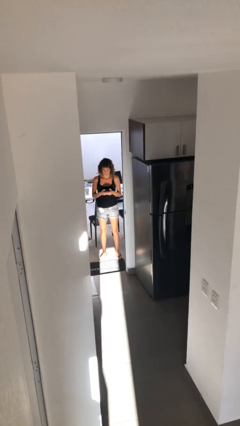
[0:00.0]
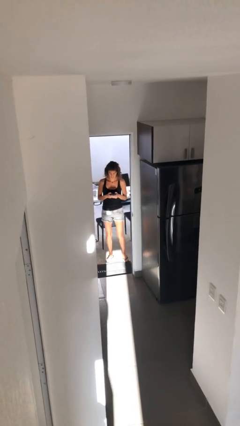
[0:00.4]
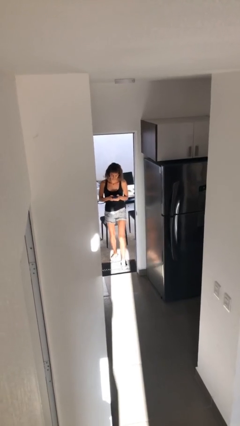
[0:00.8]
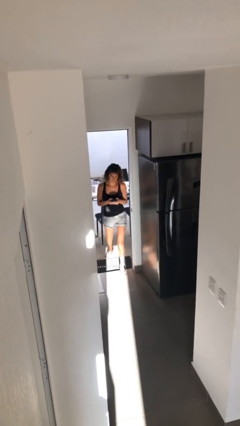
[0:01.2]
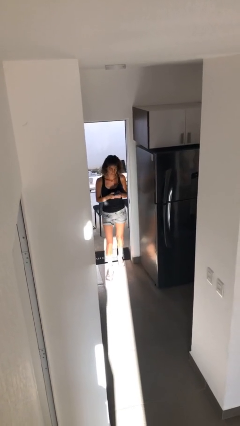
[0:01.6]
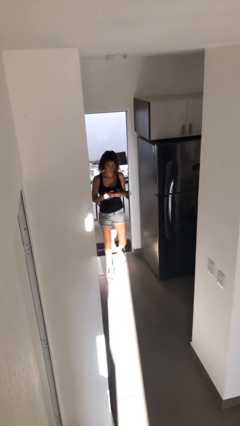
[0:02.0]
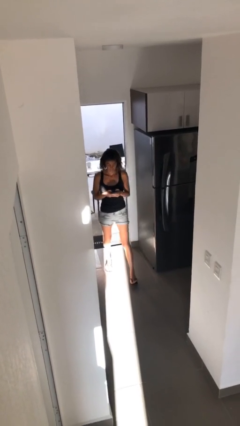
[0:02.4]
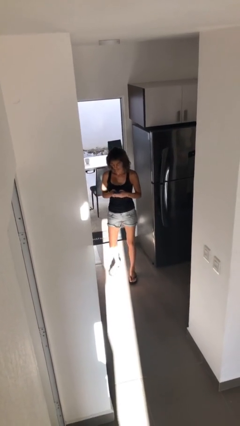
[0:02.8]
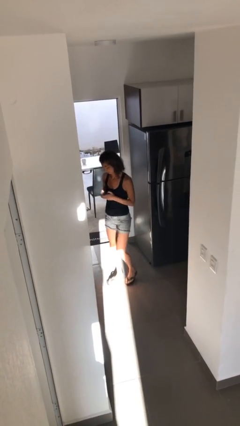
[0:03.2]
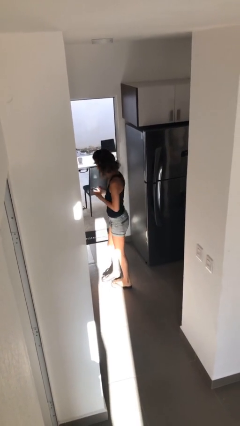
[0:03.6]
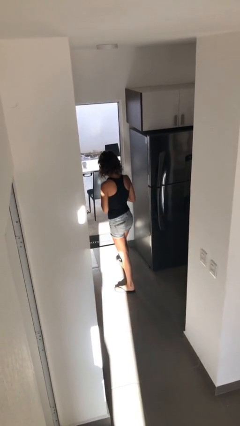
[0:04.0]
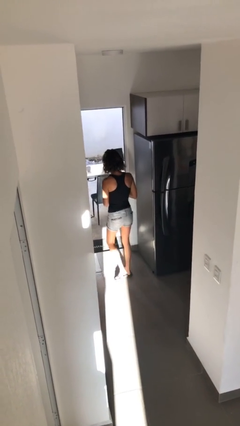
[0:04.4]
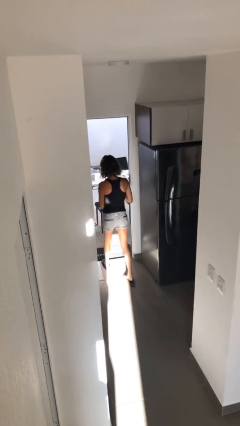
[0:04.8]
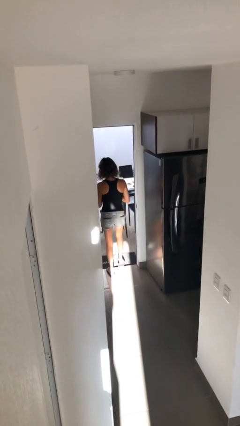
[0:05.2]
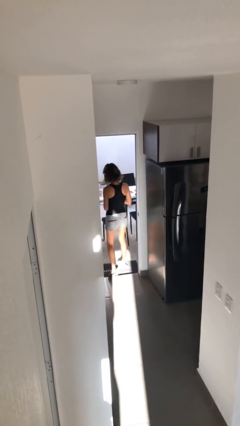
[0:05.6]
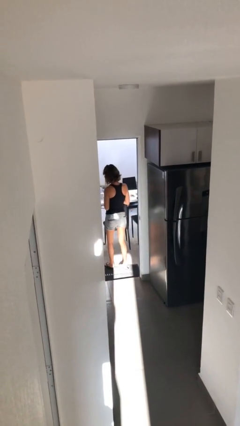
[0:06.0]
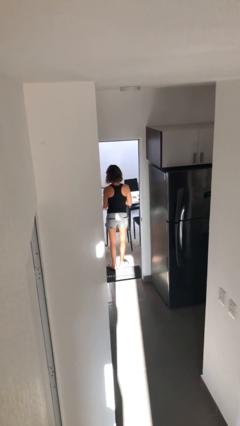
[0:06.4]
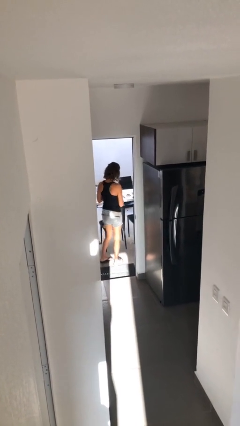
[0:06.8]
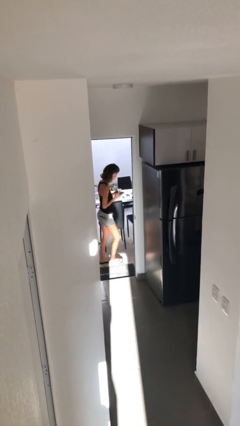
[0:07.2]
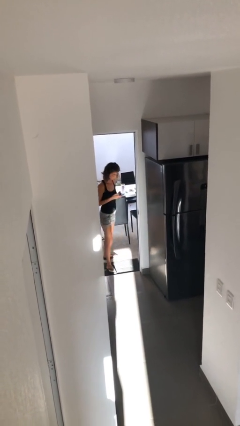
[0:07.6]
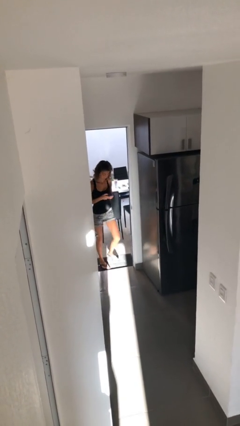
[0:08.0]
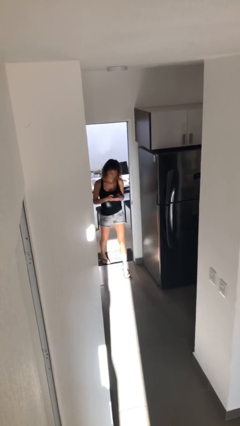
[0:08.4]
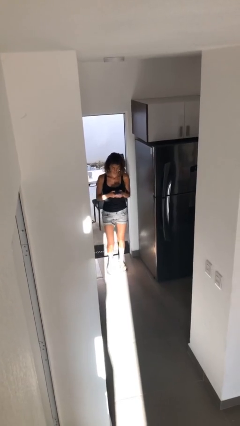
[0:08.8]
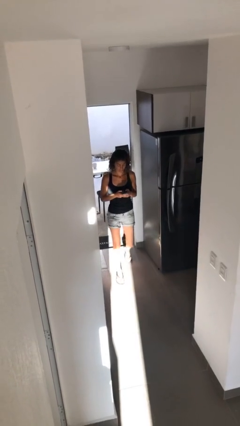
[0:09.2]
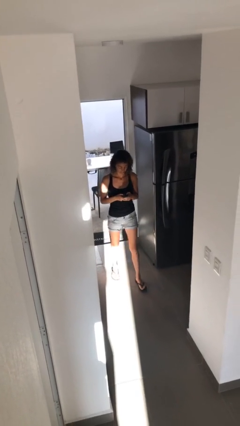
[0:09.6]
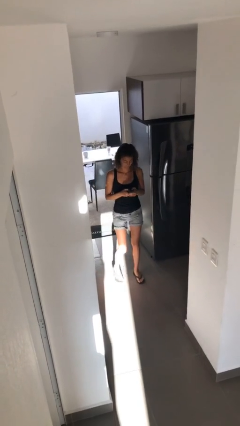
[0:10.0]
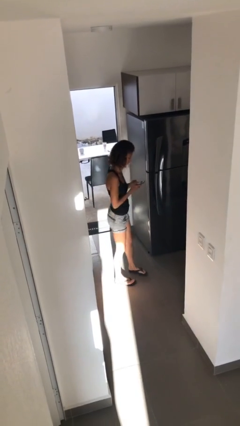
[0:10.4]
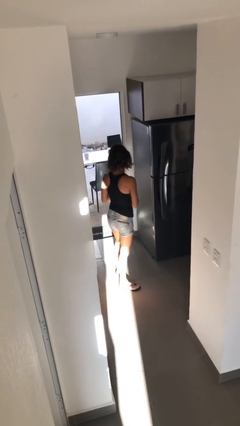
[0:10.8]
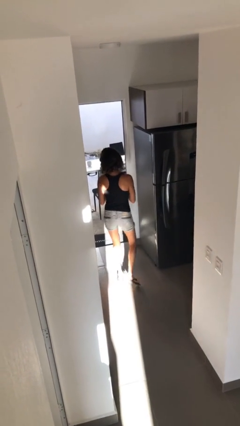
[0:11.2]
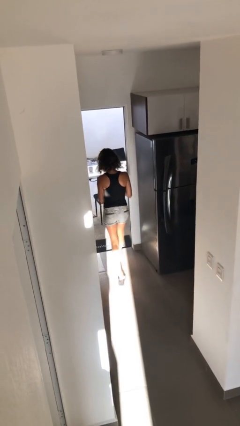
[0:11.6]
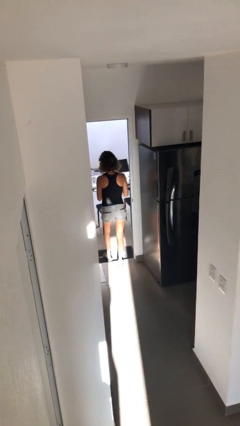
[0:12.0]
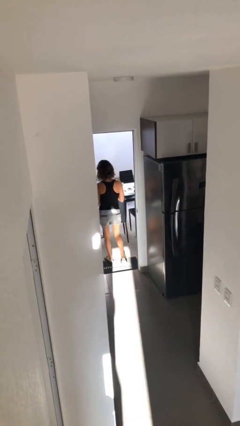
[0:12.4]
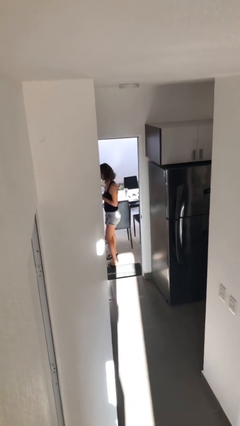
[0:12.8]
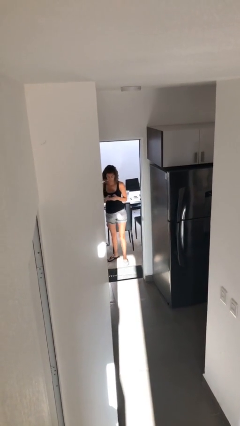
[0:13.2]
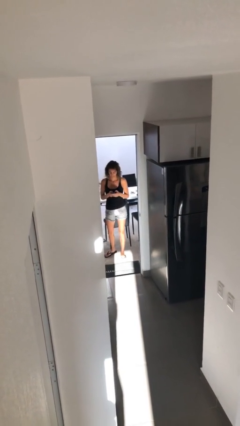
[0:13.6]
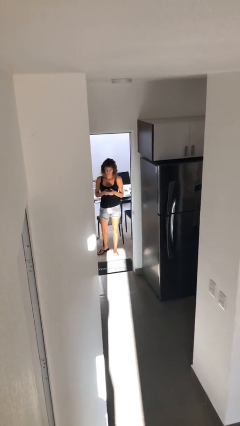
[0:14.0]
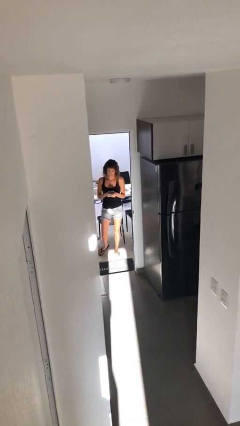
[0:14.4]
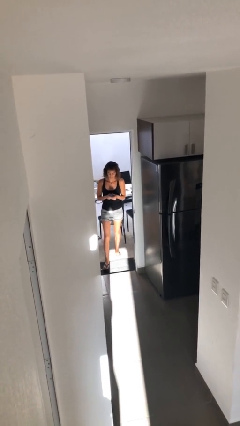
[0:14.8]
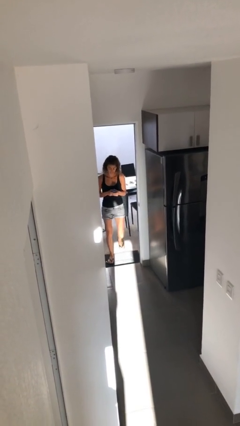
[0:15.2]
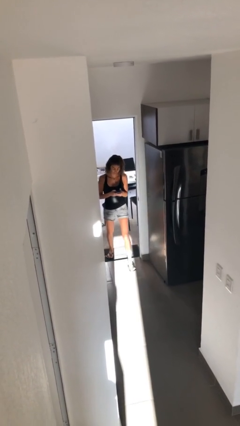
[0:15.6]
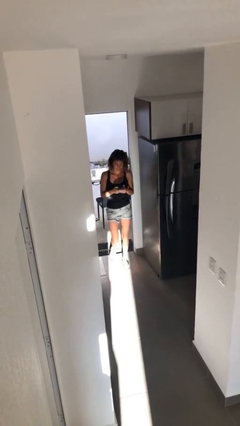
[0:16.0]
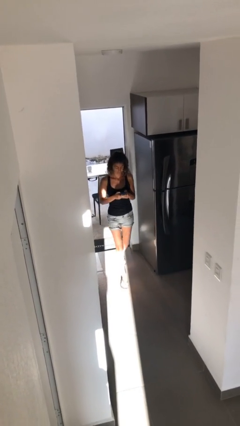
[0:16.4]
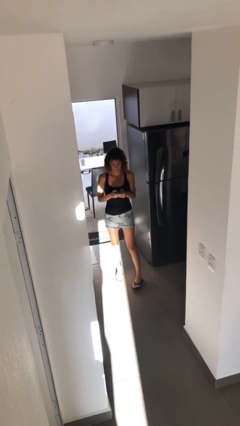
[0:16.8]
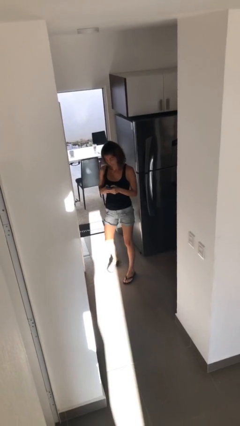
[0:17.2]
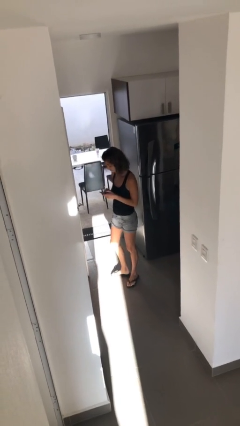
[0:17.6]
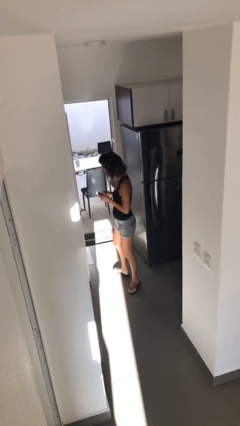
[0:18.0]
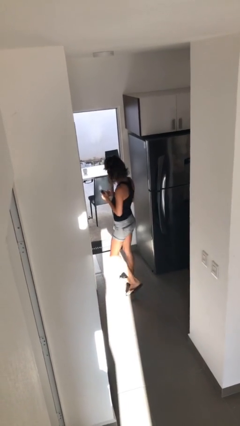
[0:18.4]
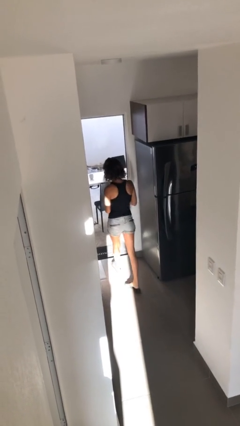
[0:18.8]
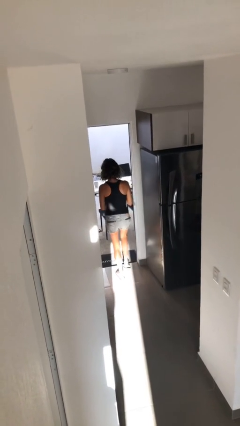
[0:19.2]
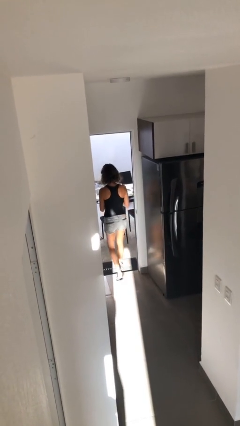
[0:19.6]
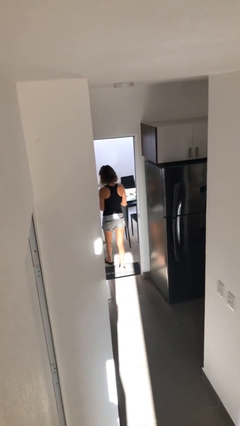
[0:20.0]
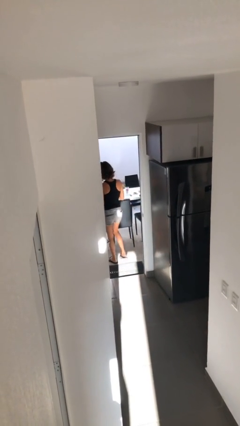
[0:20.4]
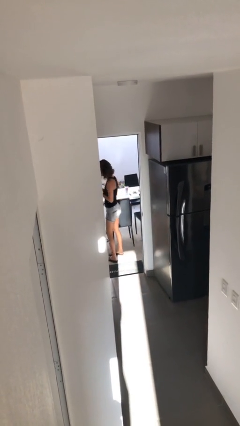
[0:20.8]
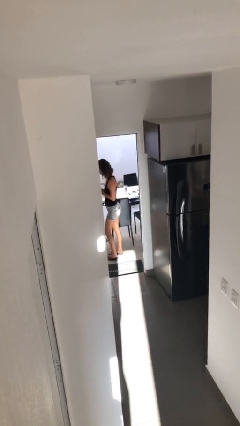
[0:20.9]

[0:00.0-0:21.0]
person texts on phone

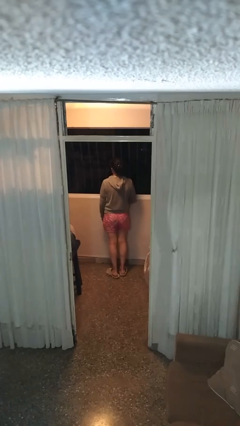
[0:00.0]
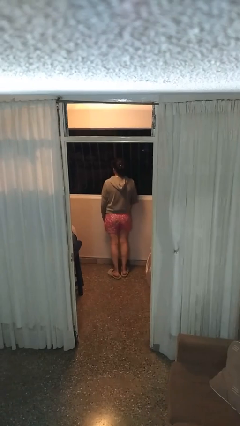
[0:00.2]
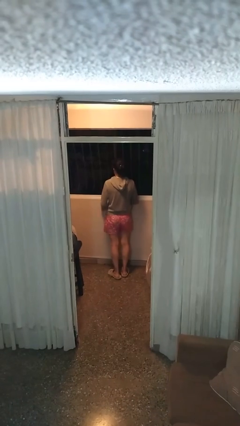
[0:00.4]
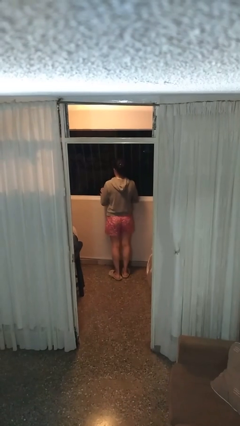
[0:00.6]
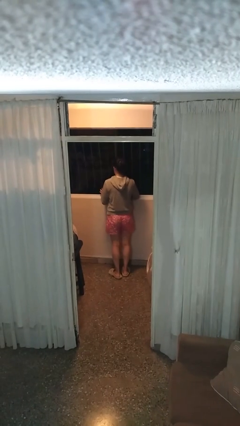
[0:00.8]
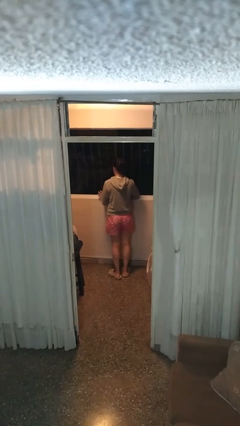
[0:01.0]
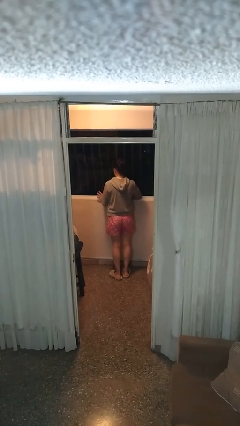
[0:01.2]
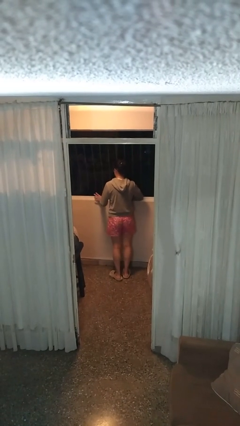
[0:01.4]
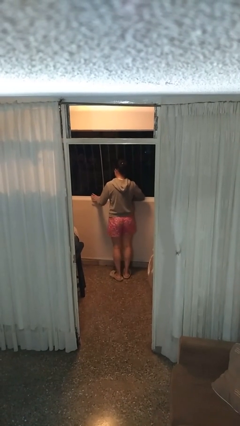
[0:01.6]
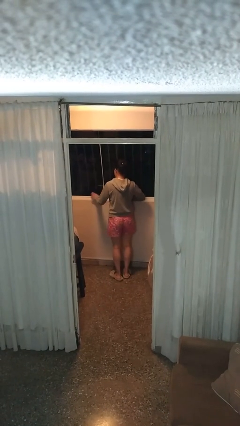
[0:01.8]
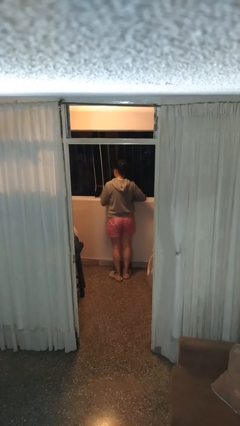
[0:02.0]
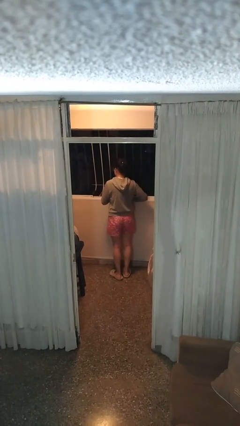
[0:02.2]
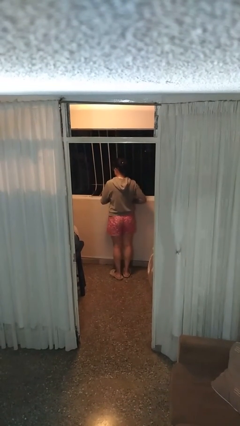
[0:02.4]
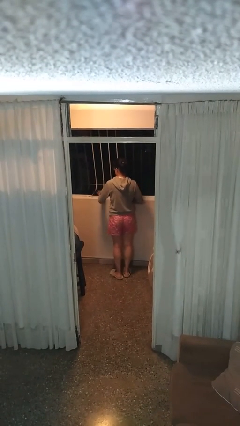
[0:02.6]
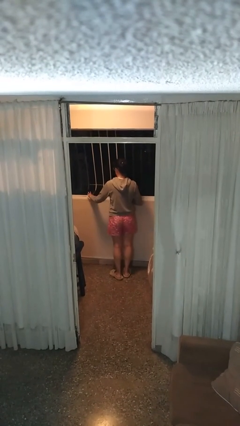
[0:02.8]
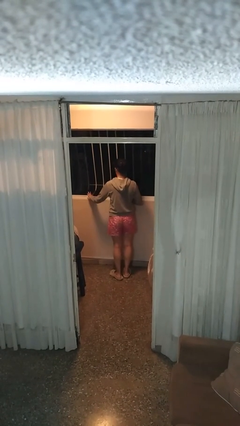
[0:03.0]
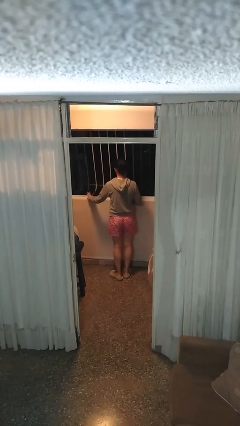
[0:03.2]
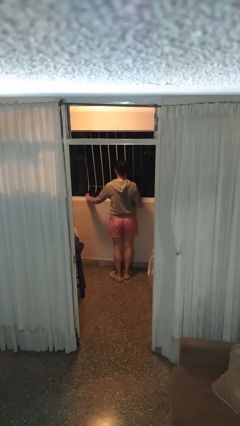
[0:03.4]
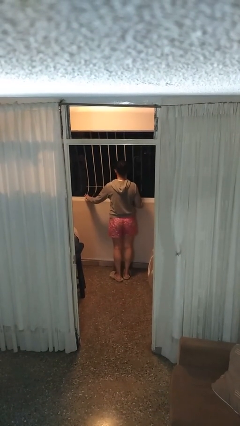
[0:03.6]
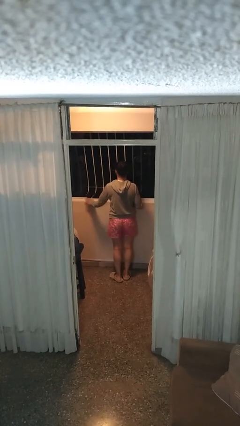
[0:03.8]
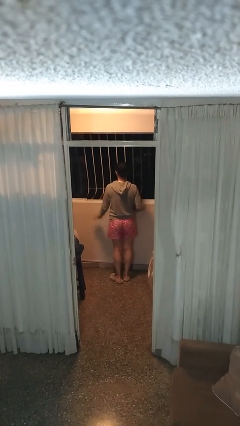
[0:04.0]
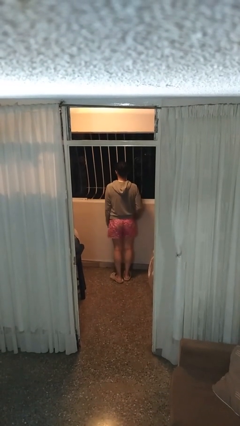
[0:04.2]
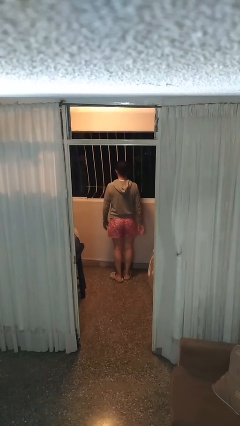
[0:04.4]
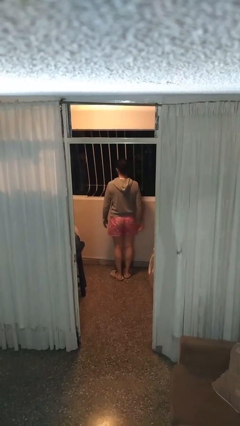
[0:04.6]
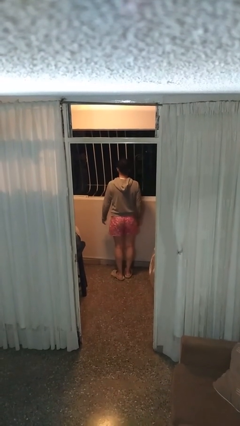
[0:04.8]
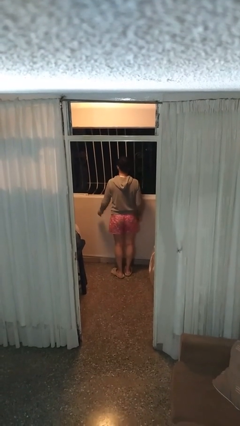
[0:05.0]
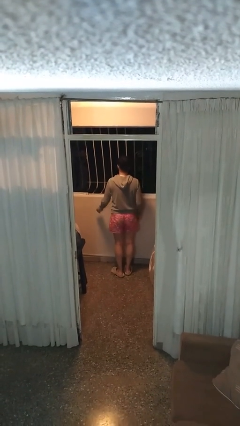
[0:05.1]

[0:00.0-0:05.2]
person opens home window

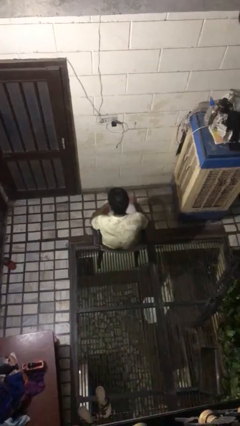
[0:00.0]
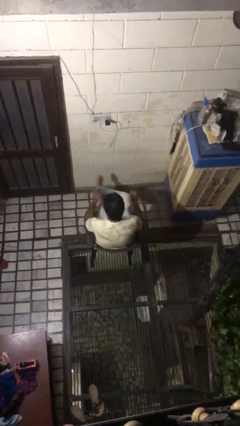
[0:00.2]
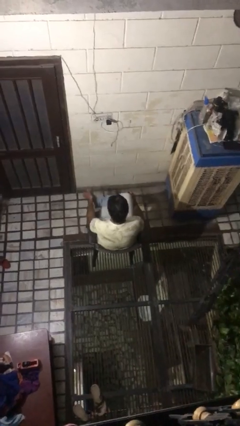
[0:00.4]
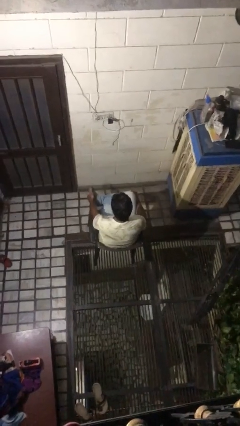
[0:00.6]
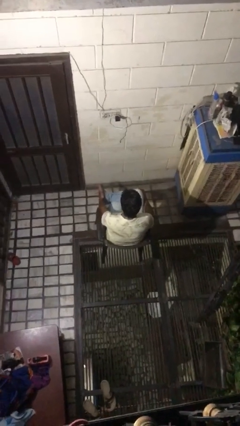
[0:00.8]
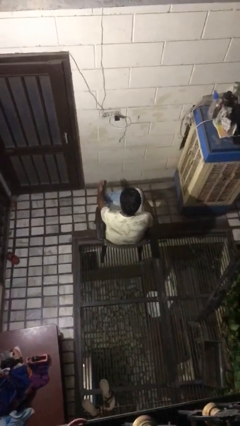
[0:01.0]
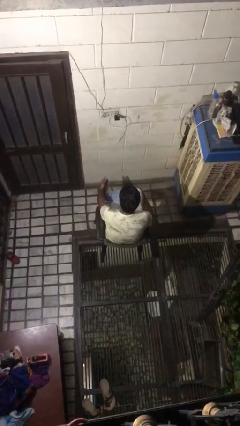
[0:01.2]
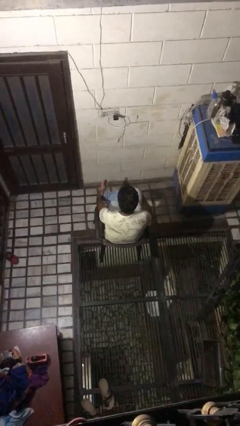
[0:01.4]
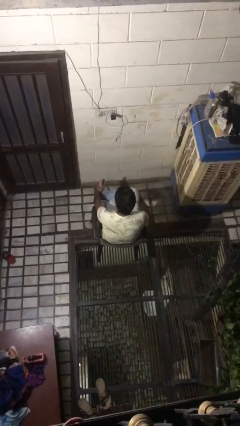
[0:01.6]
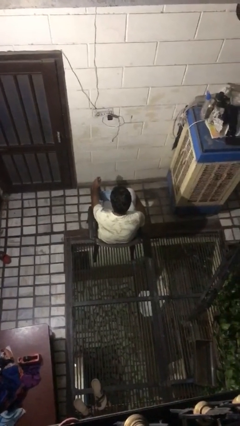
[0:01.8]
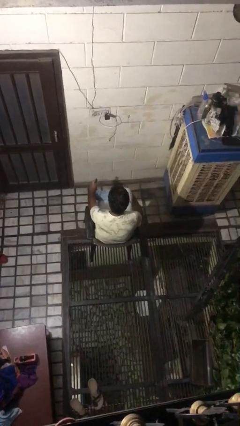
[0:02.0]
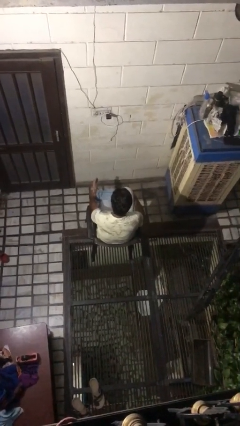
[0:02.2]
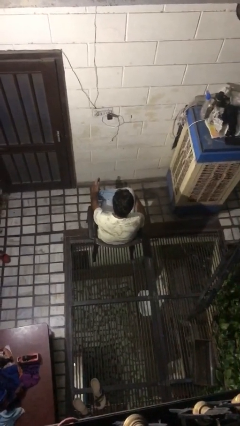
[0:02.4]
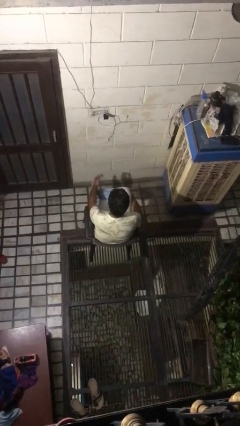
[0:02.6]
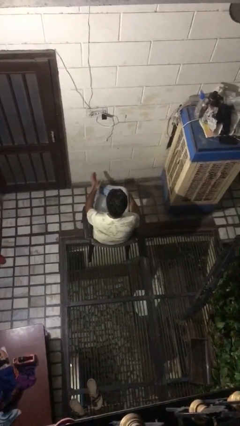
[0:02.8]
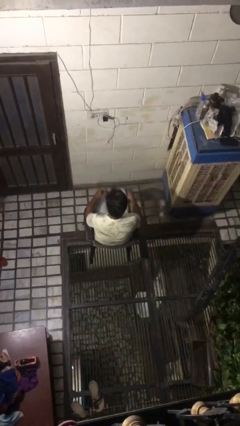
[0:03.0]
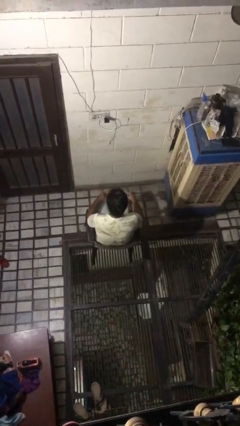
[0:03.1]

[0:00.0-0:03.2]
person rubs foot
